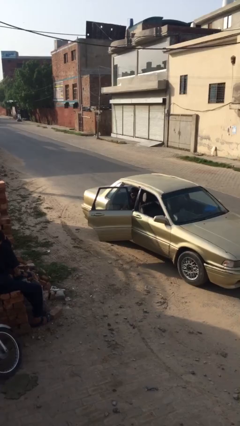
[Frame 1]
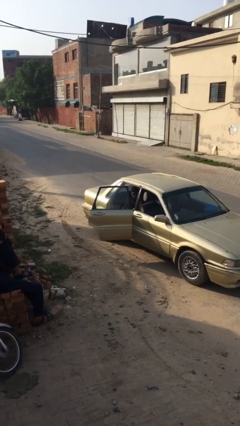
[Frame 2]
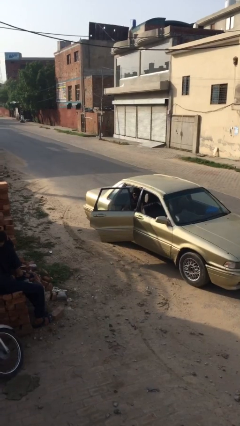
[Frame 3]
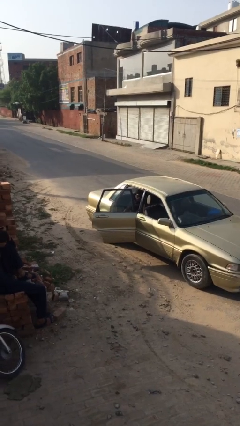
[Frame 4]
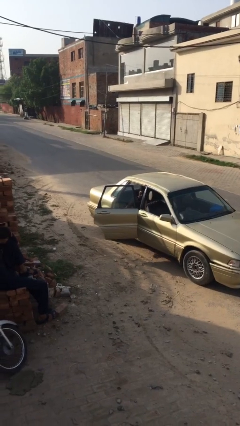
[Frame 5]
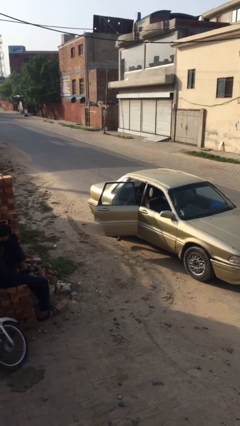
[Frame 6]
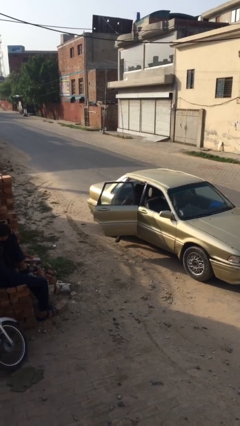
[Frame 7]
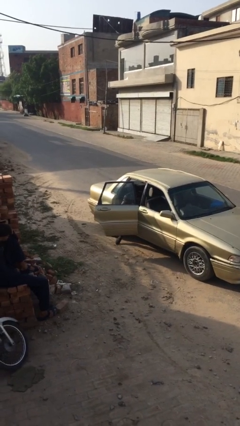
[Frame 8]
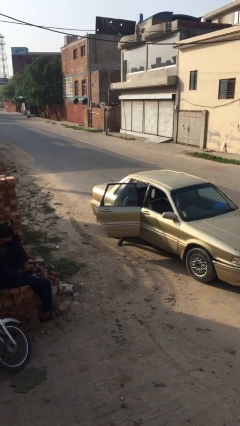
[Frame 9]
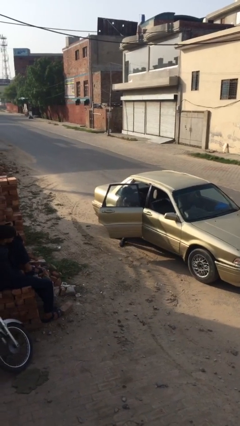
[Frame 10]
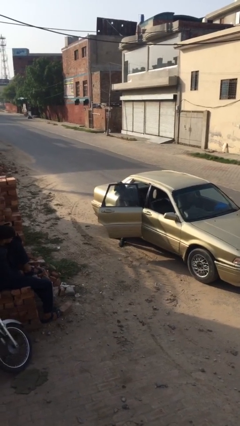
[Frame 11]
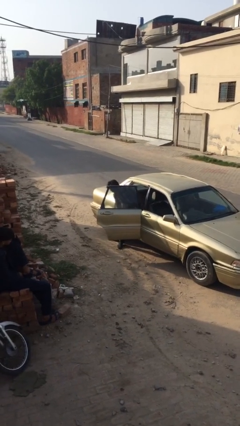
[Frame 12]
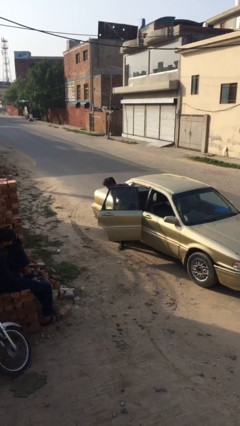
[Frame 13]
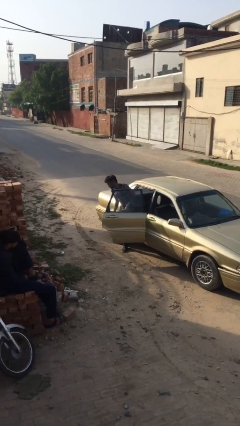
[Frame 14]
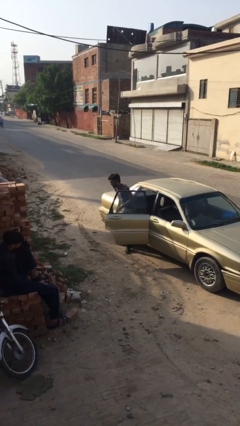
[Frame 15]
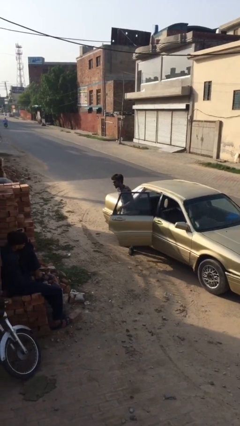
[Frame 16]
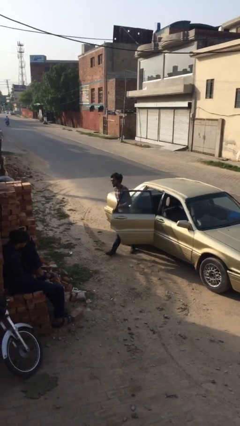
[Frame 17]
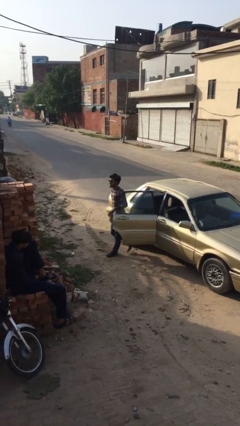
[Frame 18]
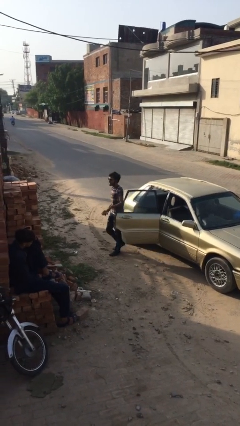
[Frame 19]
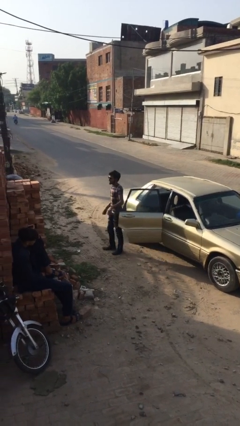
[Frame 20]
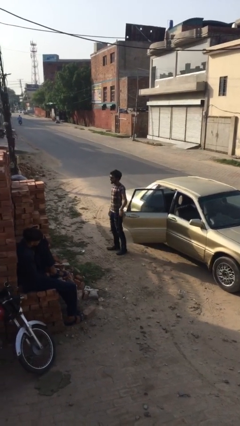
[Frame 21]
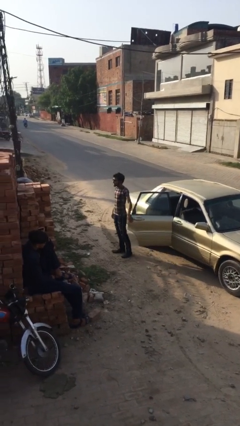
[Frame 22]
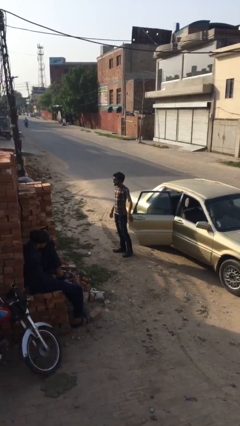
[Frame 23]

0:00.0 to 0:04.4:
person exits car

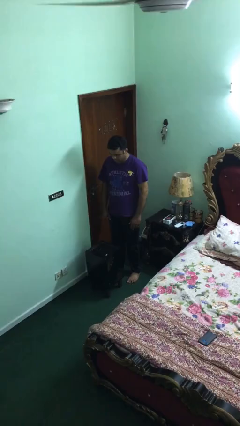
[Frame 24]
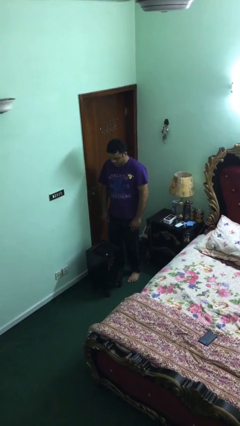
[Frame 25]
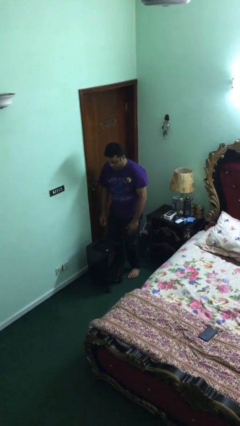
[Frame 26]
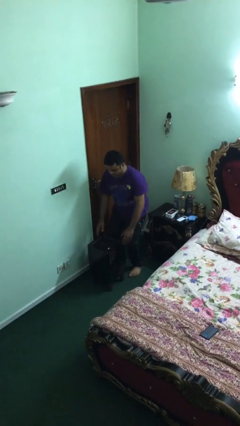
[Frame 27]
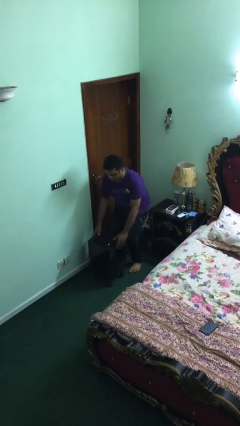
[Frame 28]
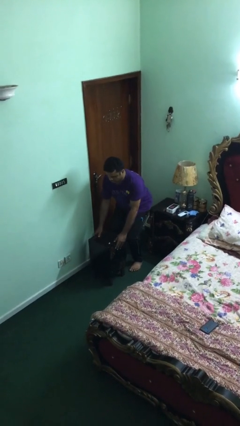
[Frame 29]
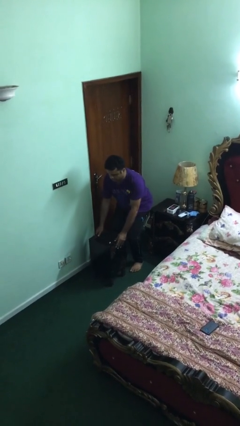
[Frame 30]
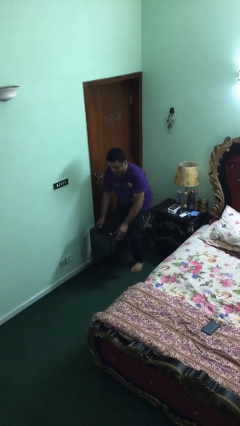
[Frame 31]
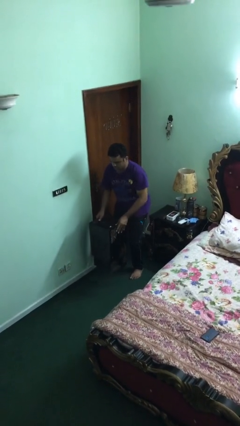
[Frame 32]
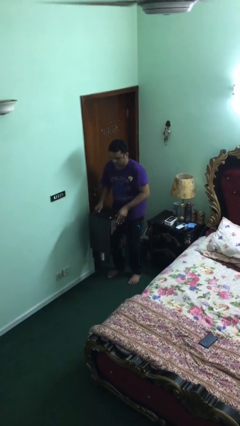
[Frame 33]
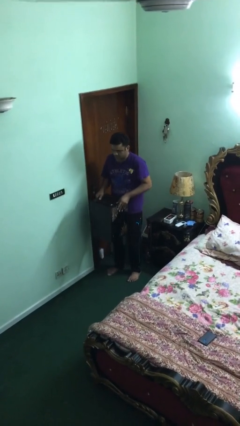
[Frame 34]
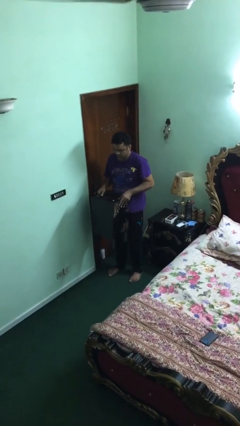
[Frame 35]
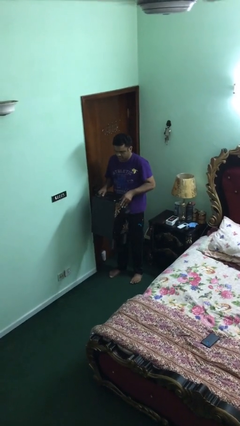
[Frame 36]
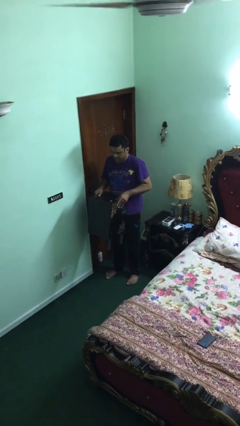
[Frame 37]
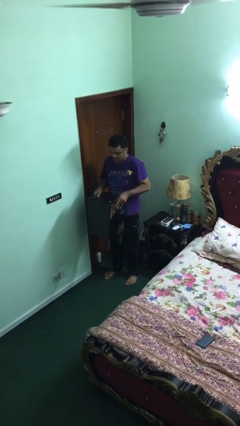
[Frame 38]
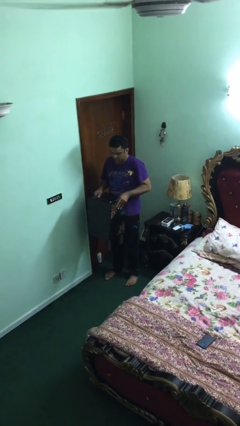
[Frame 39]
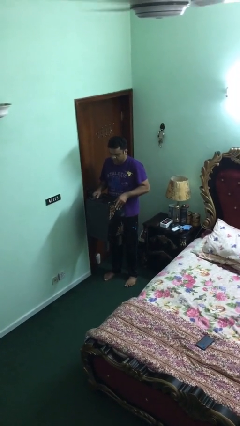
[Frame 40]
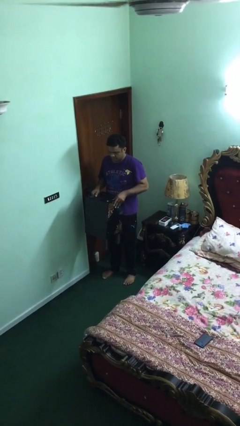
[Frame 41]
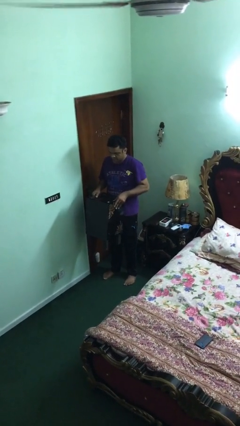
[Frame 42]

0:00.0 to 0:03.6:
person picks up object from floor

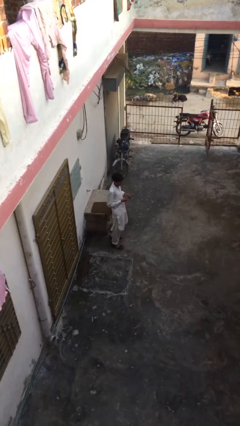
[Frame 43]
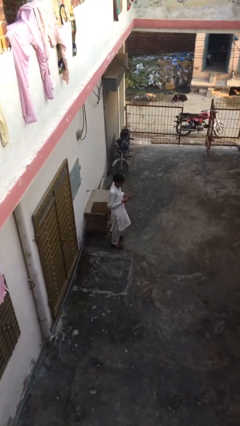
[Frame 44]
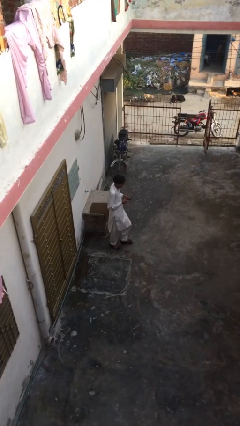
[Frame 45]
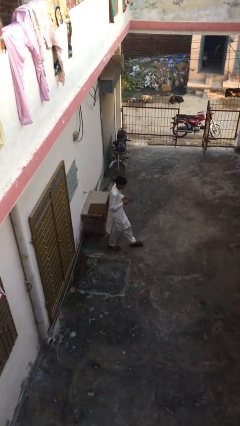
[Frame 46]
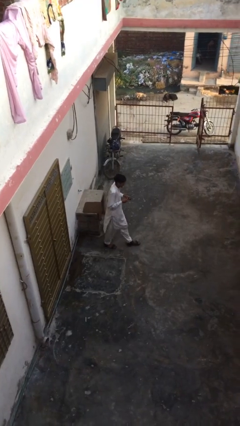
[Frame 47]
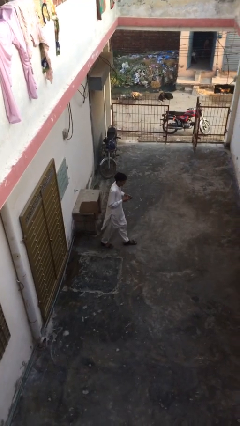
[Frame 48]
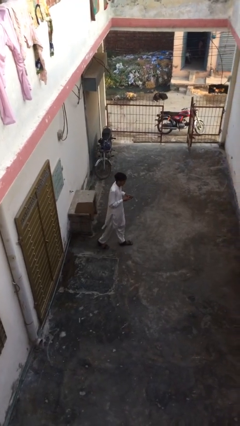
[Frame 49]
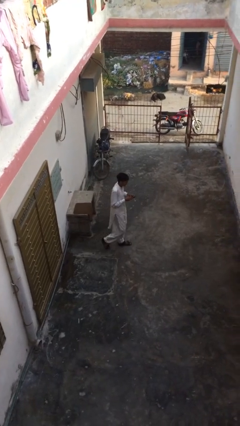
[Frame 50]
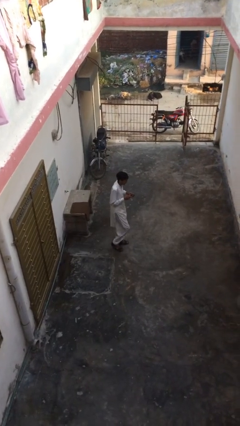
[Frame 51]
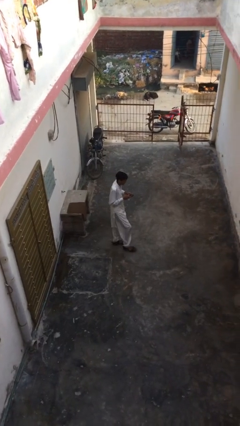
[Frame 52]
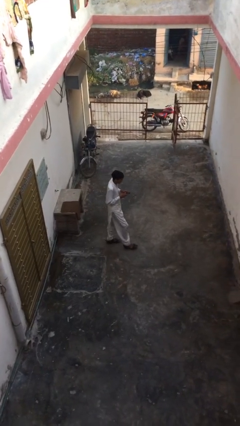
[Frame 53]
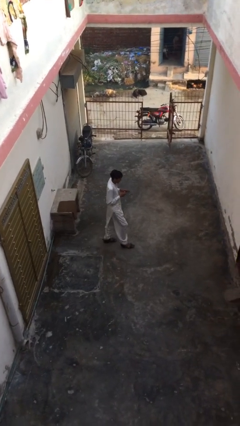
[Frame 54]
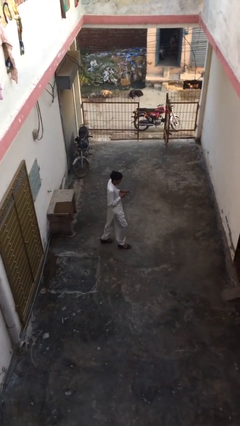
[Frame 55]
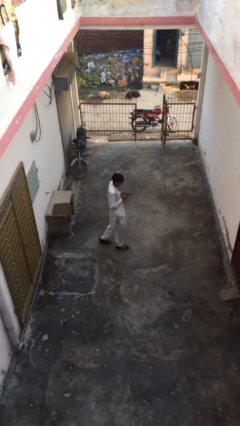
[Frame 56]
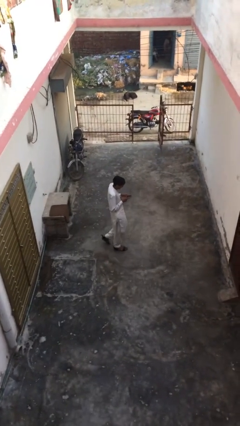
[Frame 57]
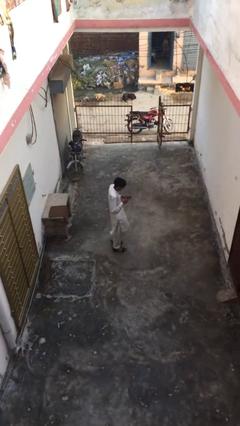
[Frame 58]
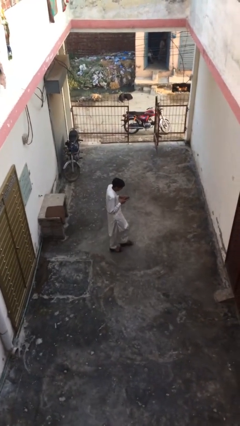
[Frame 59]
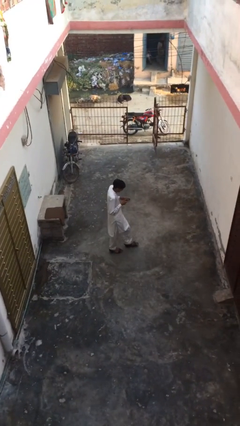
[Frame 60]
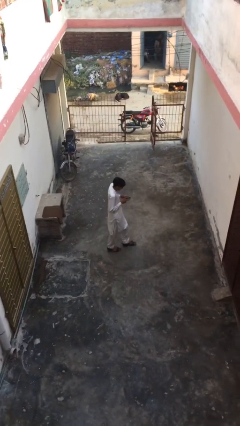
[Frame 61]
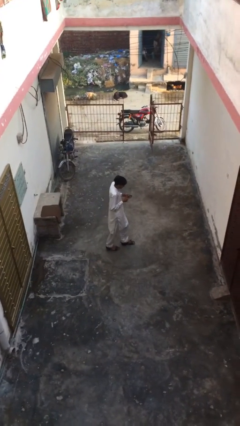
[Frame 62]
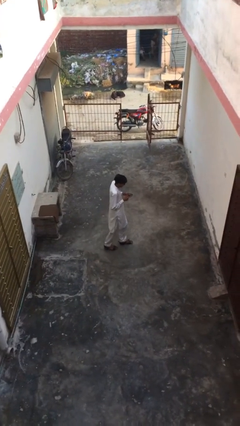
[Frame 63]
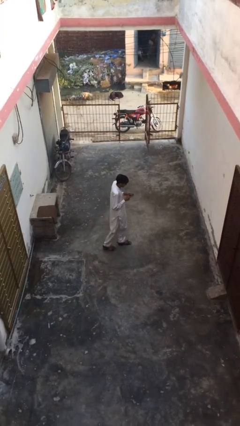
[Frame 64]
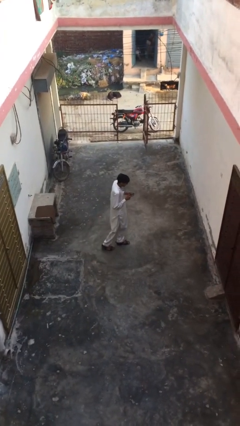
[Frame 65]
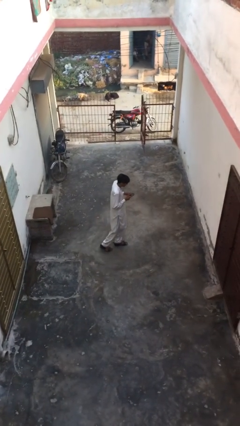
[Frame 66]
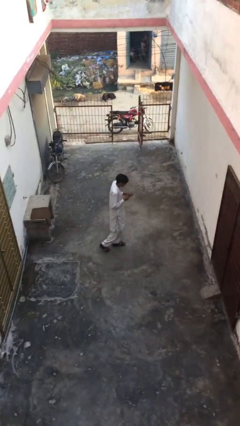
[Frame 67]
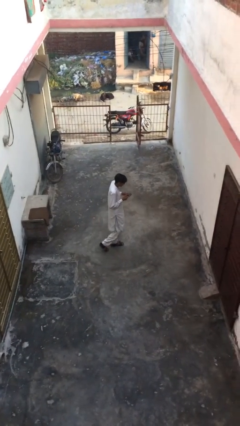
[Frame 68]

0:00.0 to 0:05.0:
person texts on phone

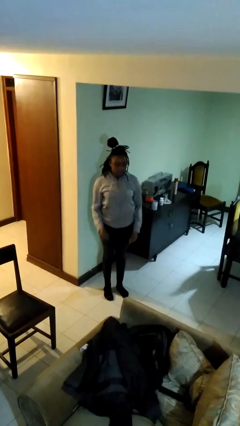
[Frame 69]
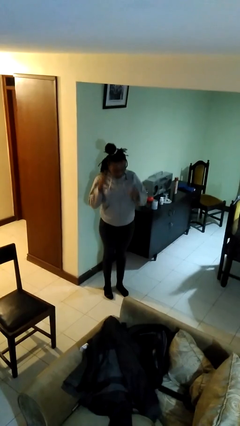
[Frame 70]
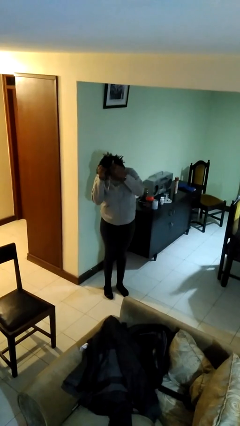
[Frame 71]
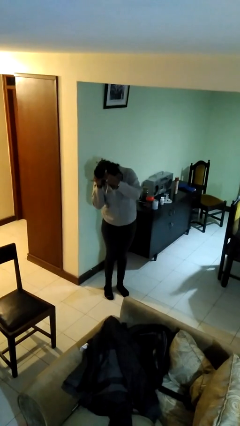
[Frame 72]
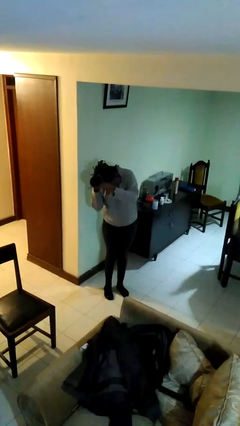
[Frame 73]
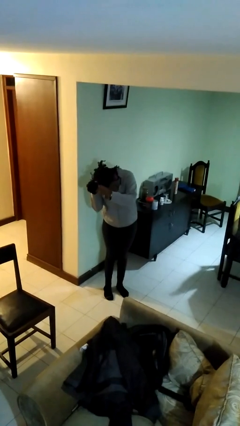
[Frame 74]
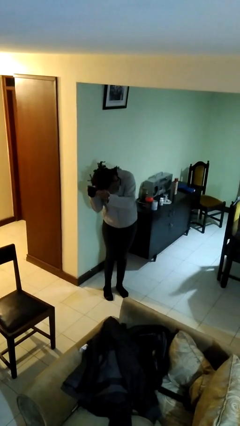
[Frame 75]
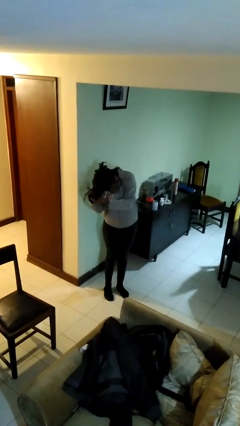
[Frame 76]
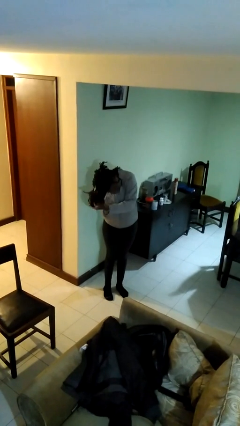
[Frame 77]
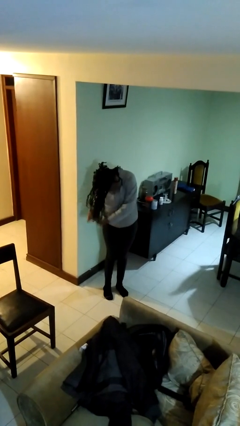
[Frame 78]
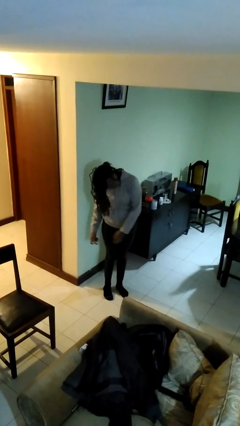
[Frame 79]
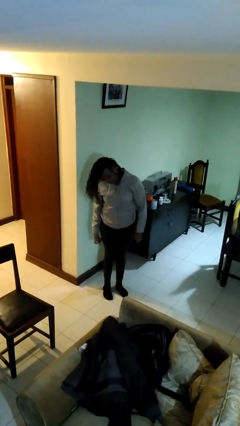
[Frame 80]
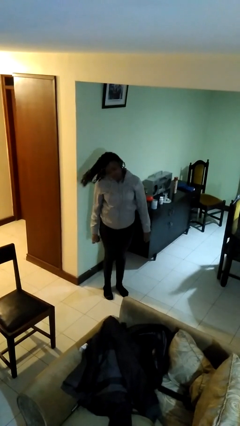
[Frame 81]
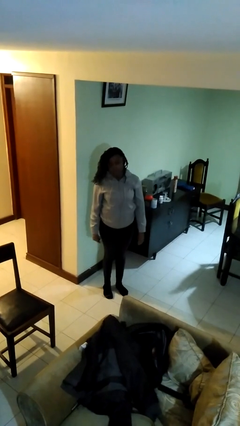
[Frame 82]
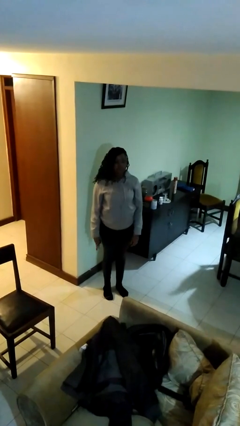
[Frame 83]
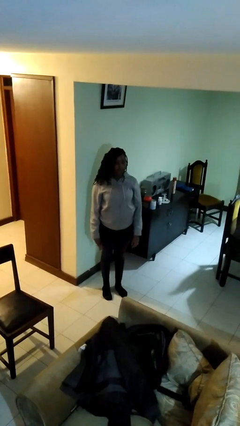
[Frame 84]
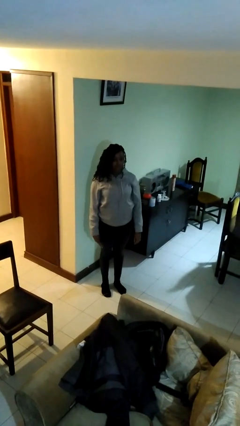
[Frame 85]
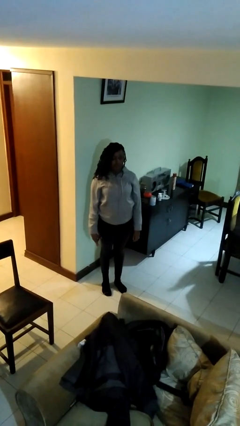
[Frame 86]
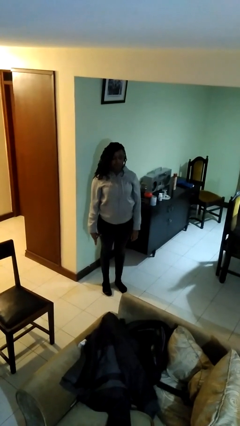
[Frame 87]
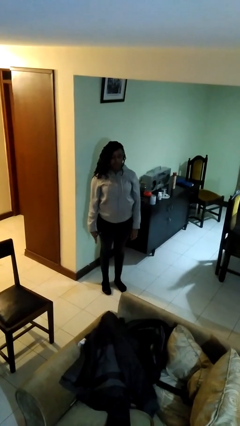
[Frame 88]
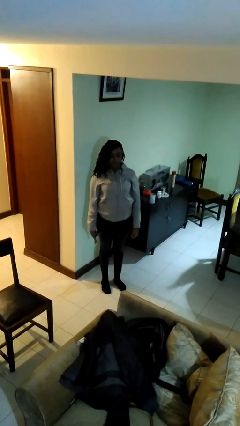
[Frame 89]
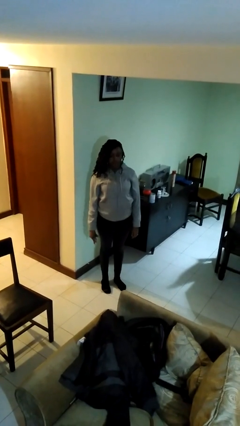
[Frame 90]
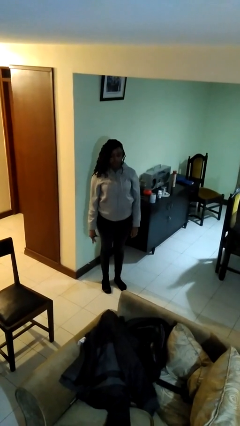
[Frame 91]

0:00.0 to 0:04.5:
person takes off hairtie

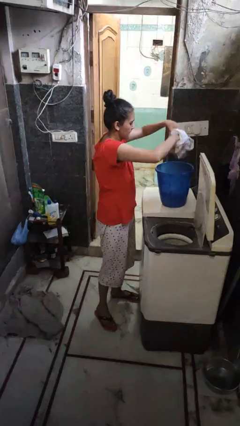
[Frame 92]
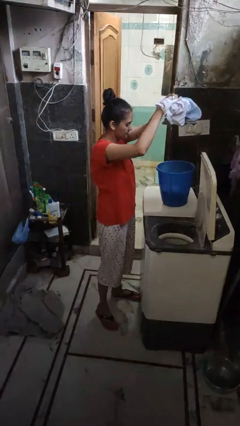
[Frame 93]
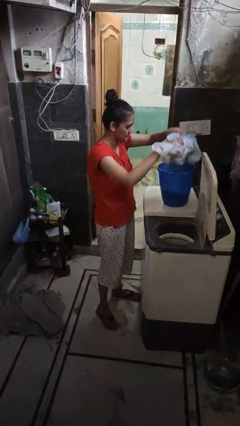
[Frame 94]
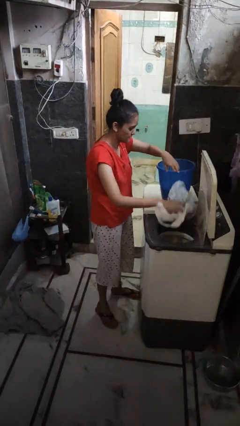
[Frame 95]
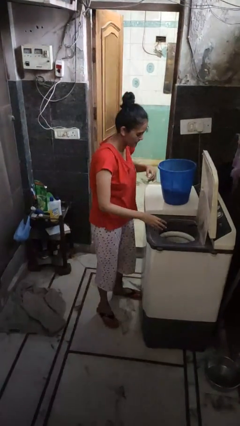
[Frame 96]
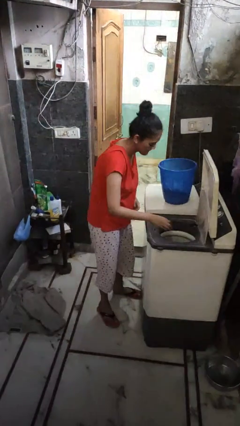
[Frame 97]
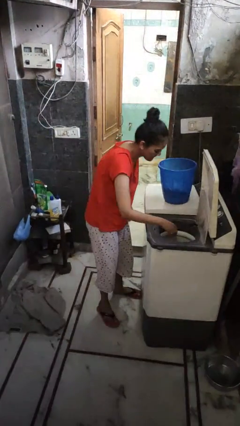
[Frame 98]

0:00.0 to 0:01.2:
person loads clotheswasher
